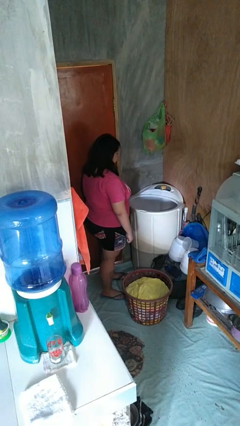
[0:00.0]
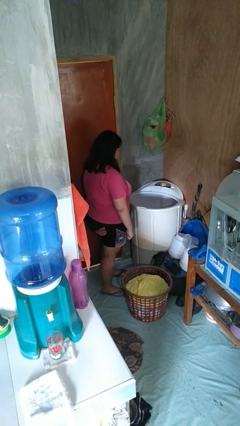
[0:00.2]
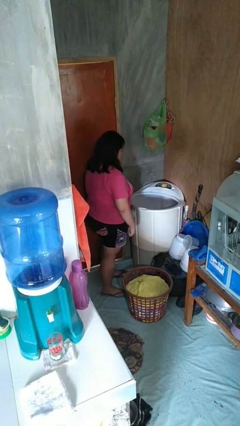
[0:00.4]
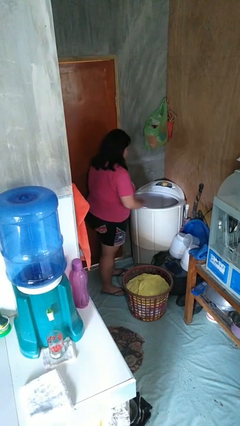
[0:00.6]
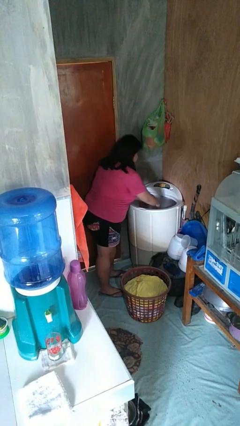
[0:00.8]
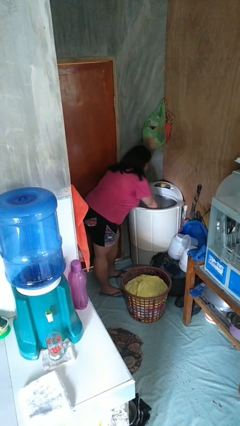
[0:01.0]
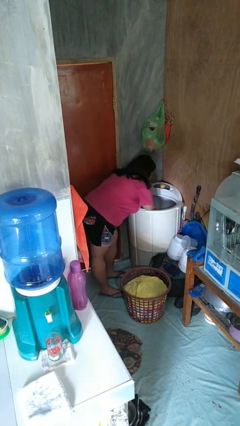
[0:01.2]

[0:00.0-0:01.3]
person unloads clotheswasher

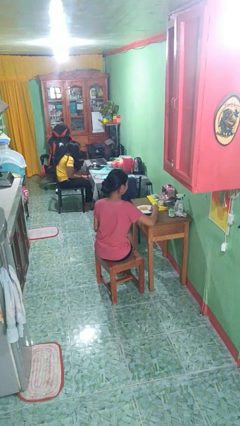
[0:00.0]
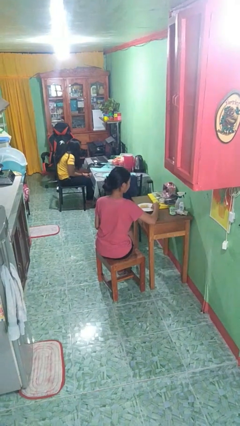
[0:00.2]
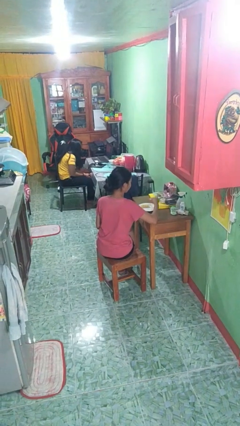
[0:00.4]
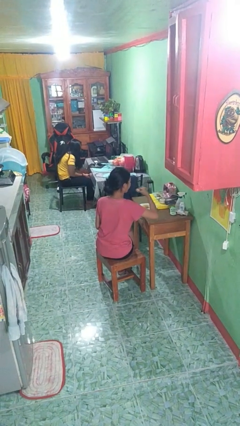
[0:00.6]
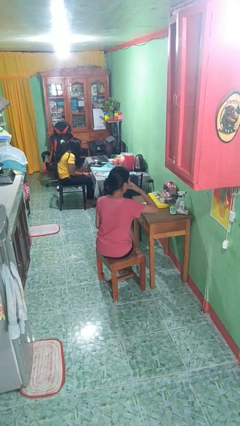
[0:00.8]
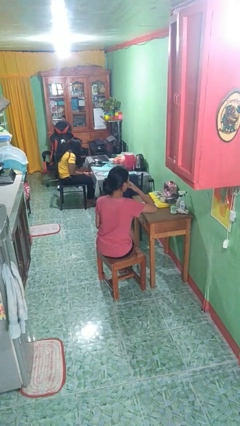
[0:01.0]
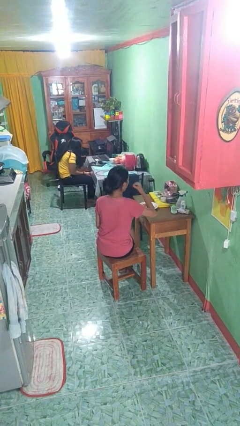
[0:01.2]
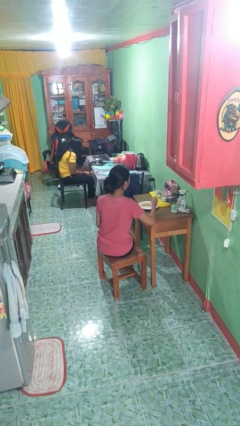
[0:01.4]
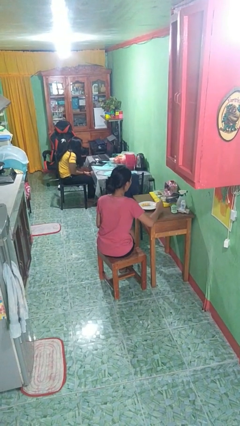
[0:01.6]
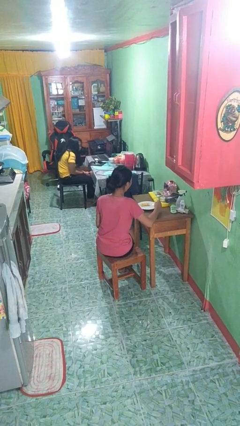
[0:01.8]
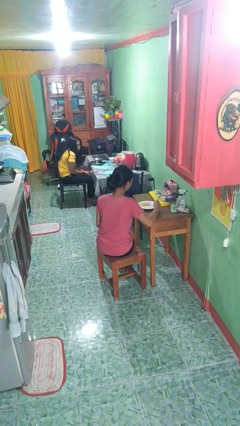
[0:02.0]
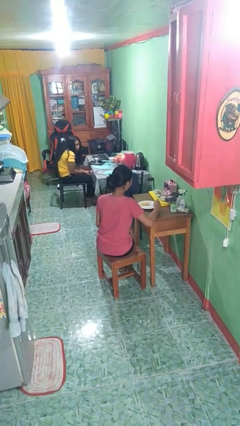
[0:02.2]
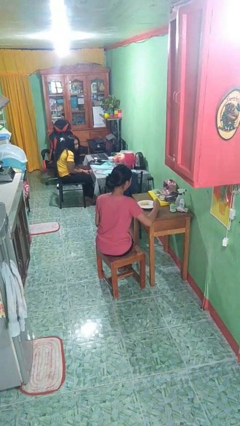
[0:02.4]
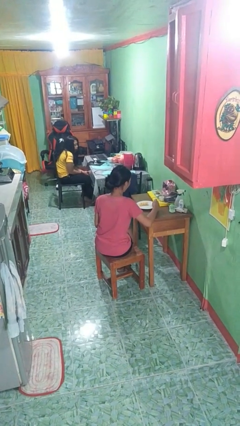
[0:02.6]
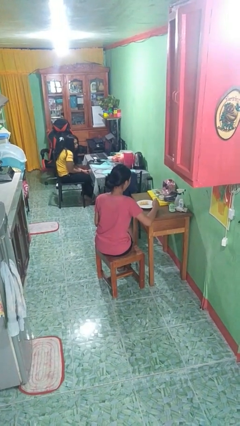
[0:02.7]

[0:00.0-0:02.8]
person eats with hands

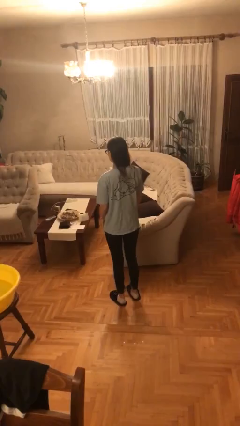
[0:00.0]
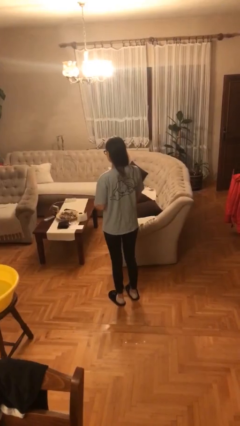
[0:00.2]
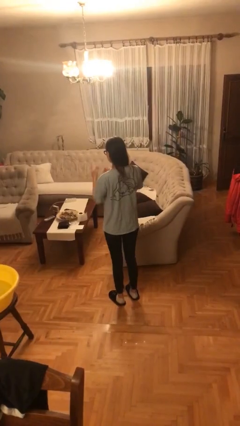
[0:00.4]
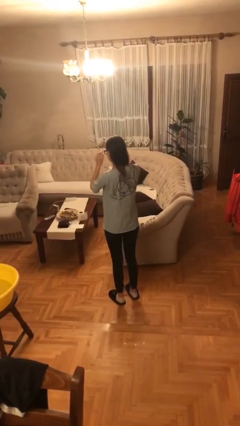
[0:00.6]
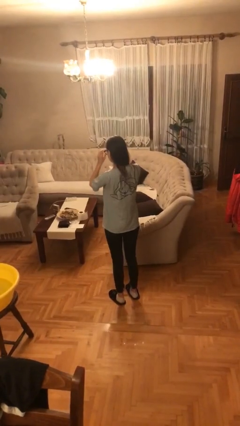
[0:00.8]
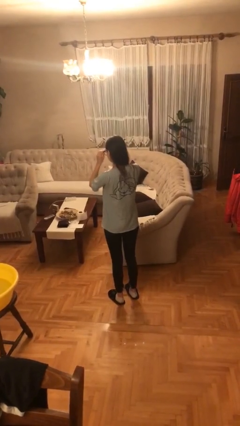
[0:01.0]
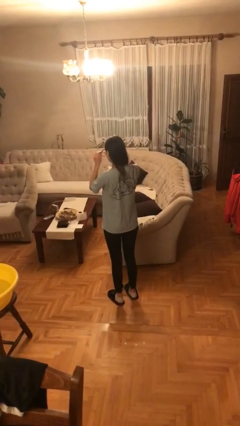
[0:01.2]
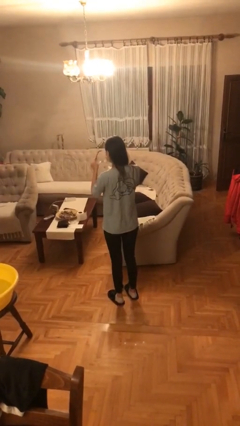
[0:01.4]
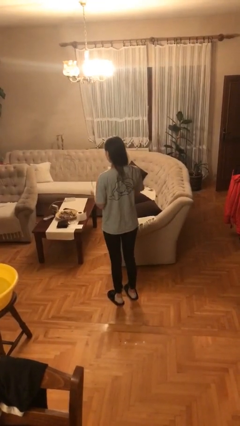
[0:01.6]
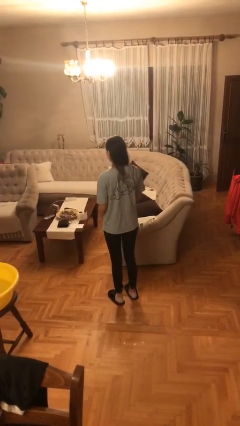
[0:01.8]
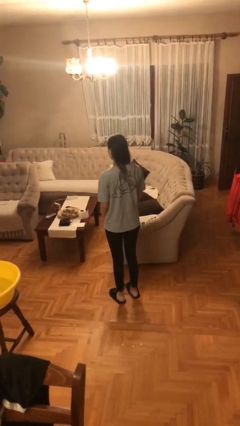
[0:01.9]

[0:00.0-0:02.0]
person takes off glasses

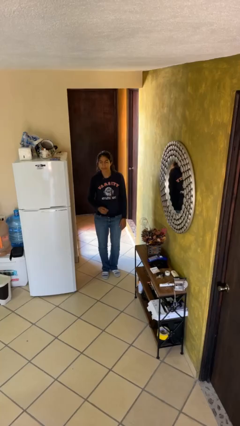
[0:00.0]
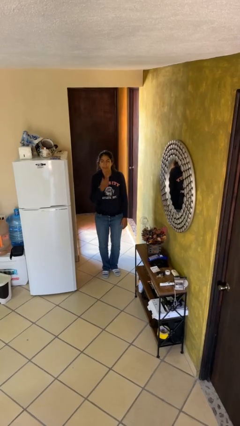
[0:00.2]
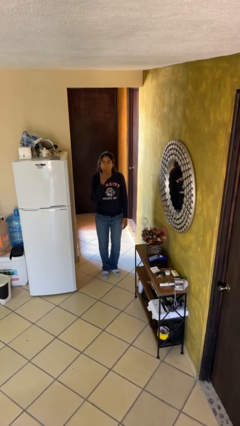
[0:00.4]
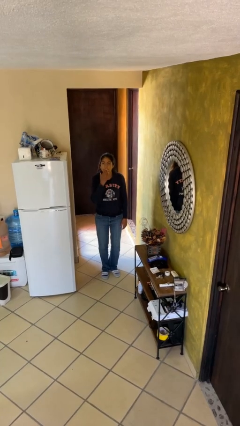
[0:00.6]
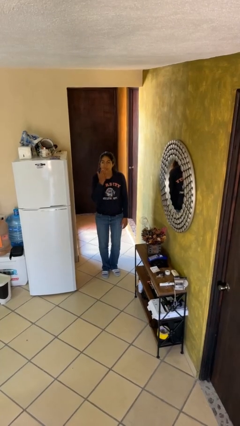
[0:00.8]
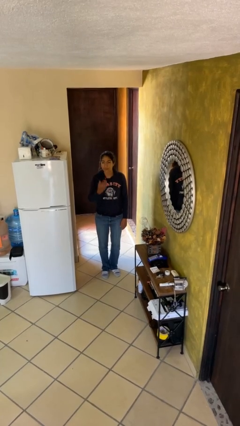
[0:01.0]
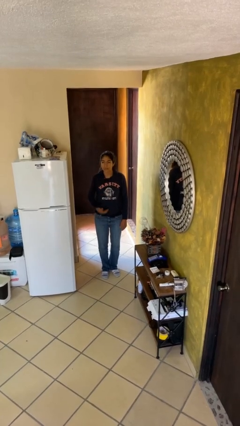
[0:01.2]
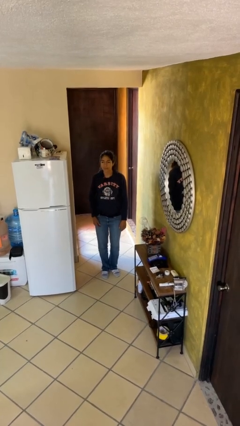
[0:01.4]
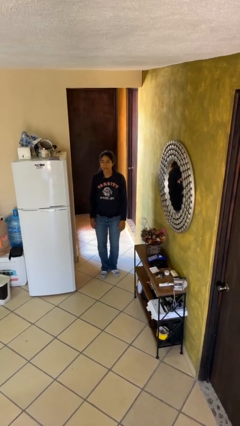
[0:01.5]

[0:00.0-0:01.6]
person gestures blow kiss

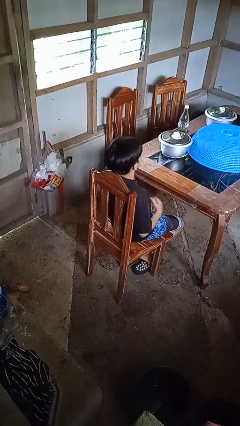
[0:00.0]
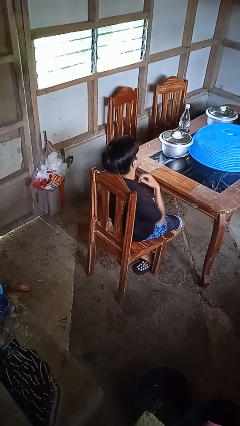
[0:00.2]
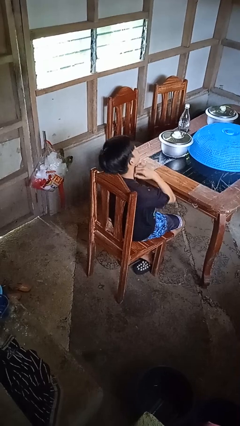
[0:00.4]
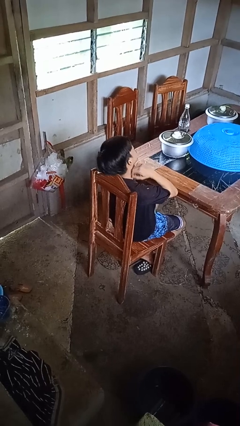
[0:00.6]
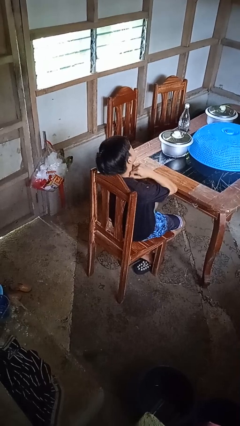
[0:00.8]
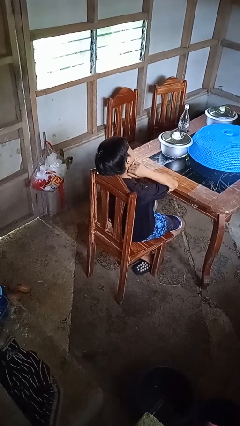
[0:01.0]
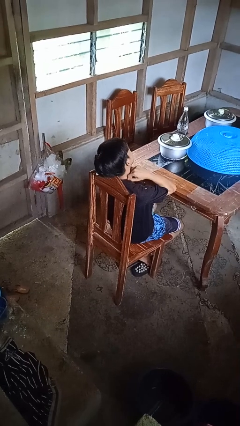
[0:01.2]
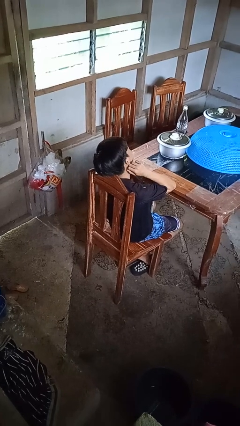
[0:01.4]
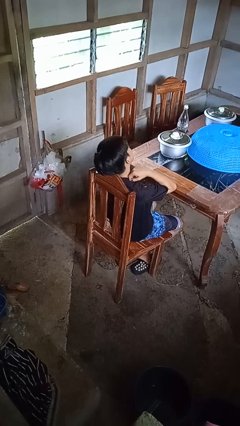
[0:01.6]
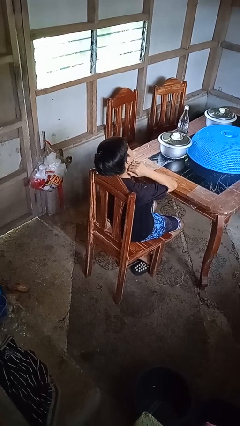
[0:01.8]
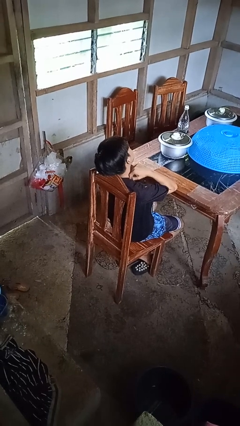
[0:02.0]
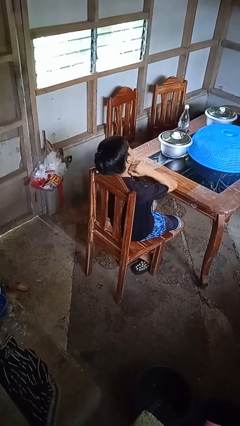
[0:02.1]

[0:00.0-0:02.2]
person rubs neck

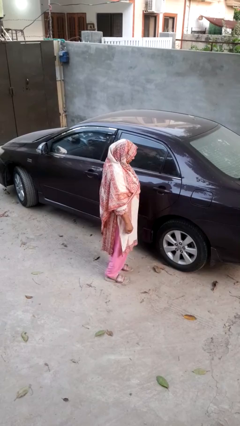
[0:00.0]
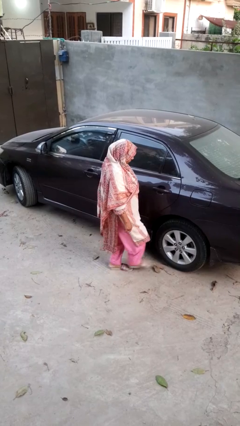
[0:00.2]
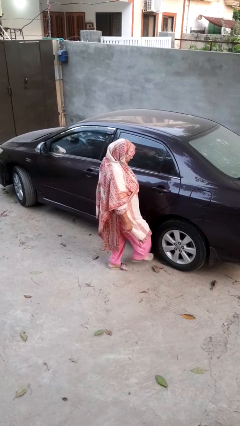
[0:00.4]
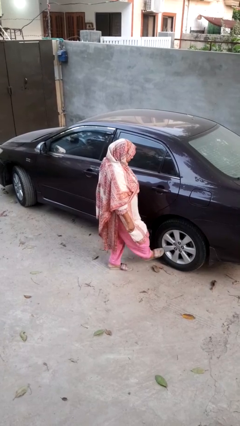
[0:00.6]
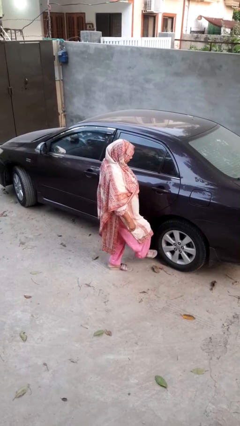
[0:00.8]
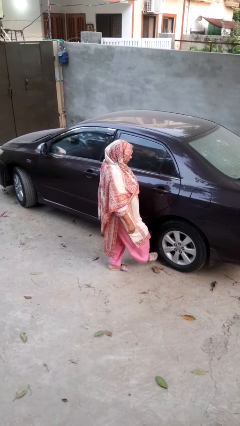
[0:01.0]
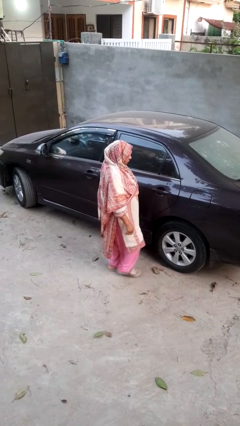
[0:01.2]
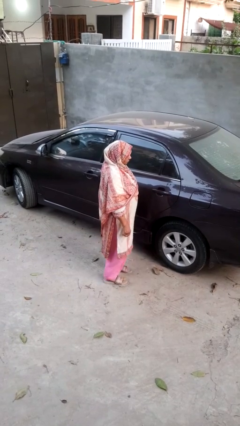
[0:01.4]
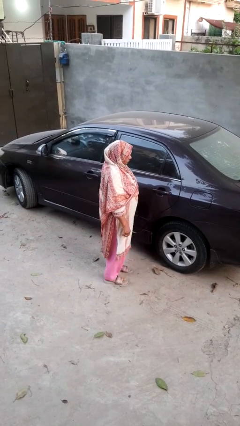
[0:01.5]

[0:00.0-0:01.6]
person kicks car tires

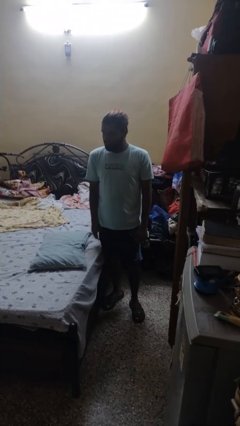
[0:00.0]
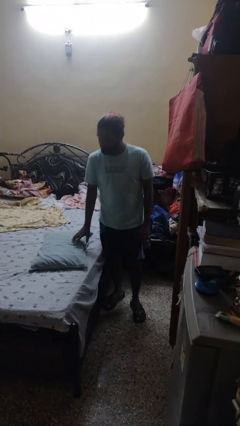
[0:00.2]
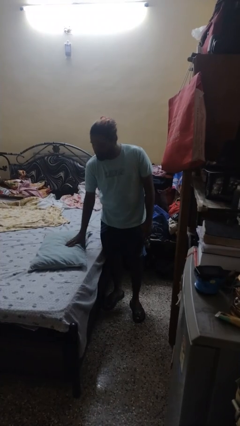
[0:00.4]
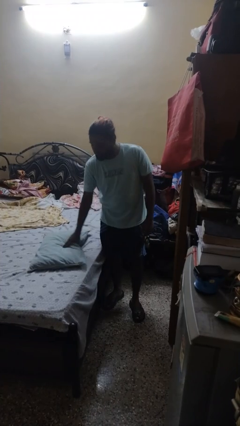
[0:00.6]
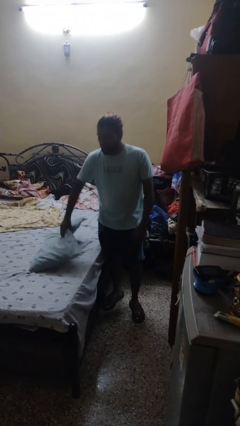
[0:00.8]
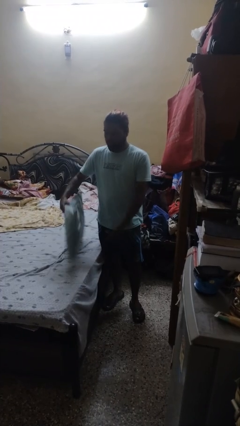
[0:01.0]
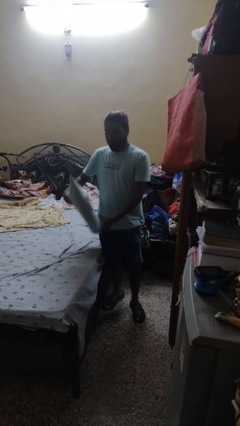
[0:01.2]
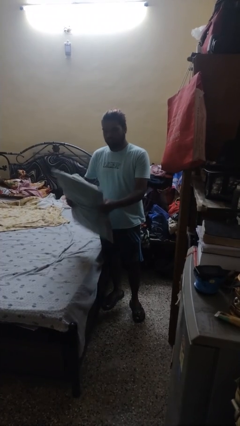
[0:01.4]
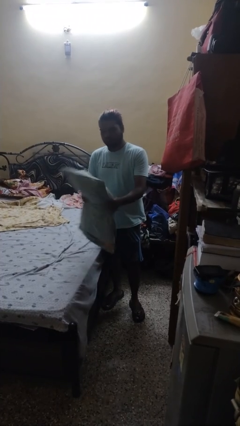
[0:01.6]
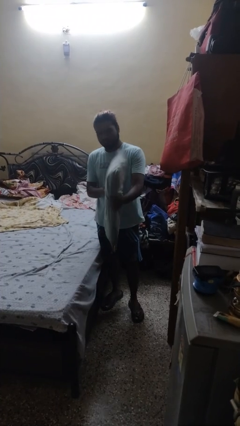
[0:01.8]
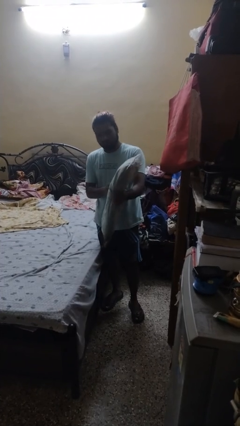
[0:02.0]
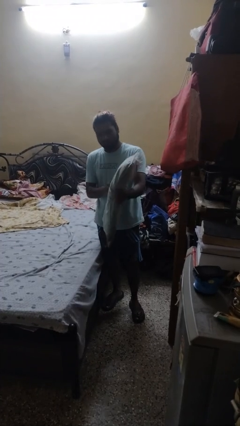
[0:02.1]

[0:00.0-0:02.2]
person picks up object from bed

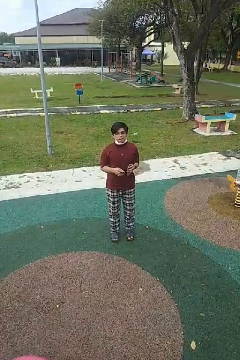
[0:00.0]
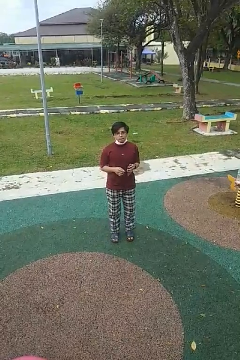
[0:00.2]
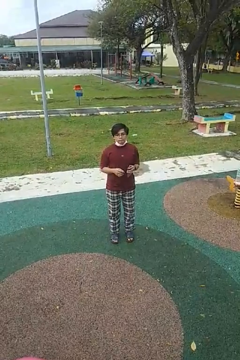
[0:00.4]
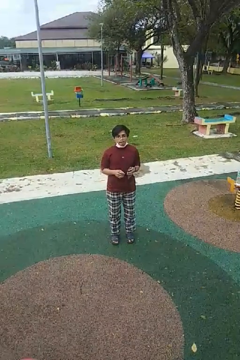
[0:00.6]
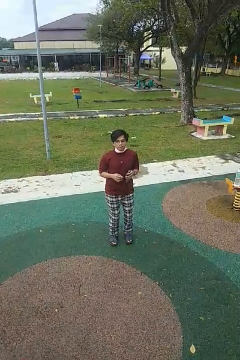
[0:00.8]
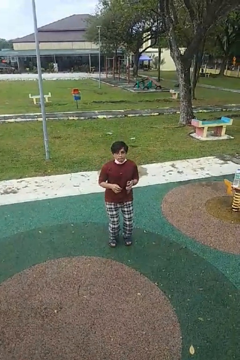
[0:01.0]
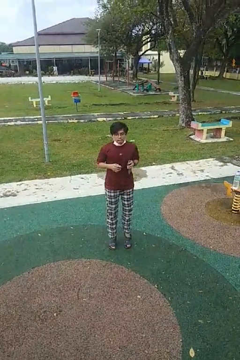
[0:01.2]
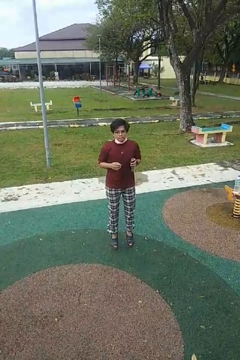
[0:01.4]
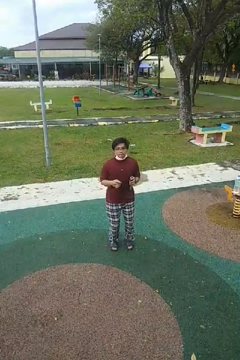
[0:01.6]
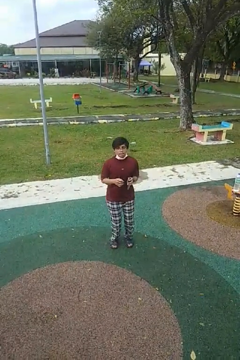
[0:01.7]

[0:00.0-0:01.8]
person jumps

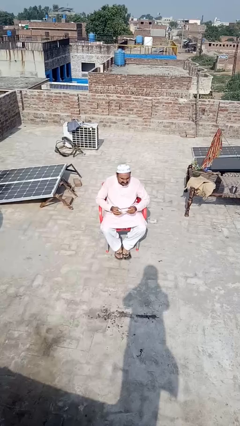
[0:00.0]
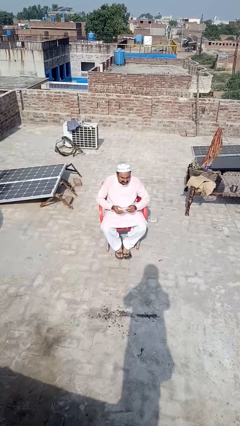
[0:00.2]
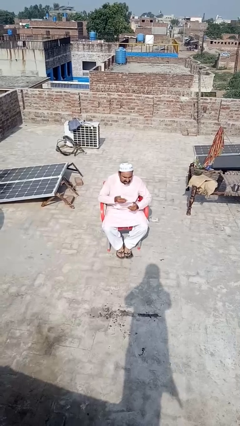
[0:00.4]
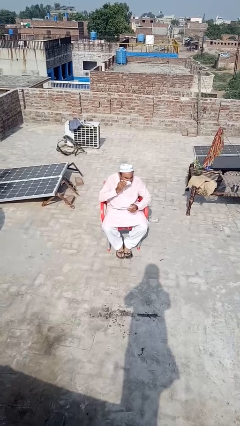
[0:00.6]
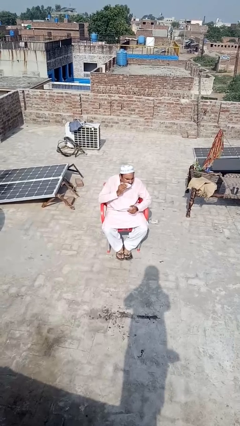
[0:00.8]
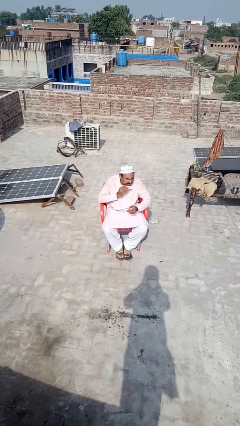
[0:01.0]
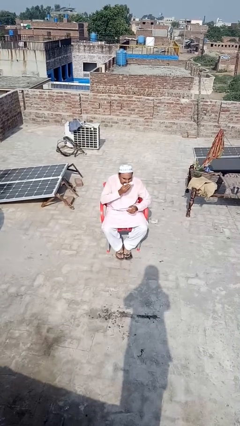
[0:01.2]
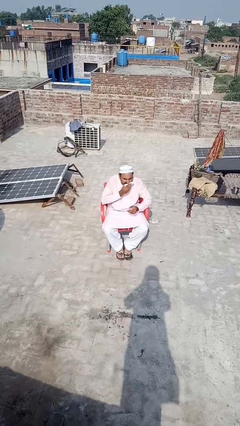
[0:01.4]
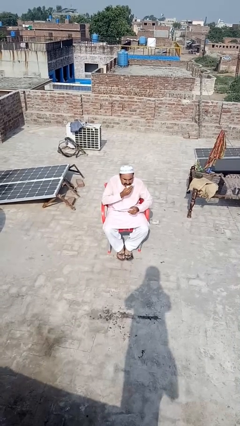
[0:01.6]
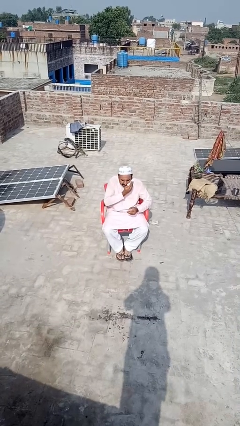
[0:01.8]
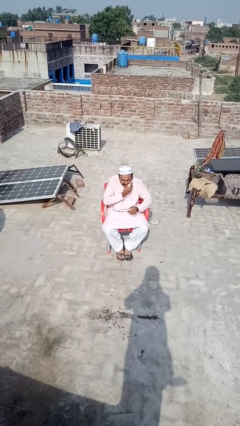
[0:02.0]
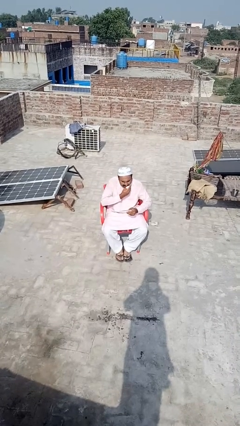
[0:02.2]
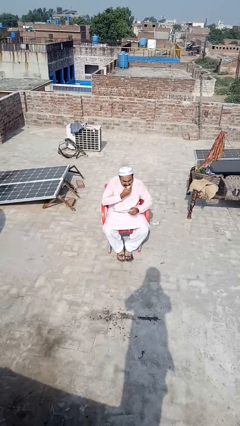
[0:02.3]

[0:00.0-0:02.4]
person wipes mouth with napkin
